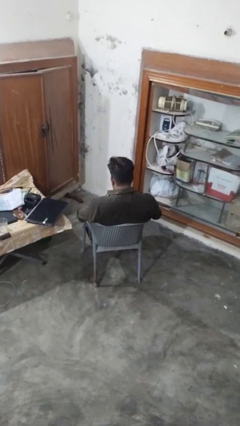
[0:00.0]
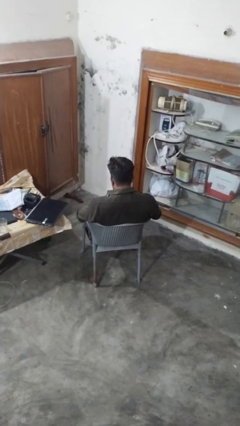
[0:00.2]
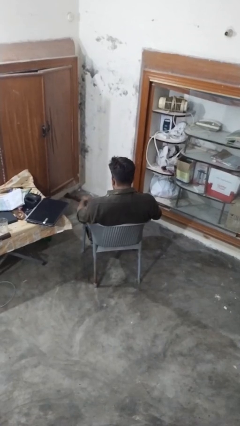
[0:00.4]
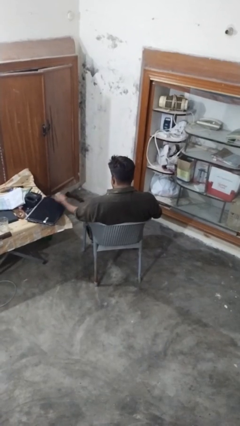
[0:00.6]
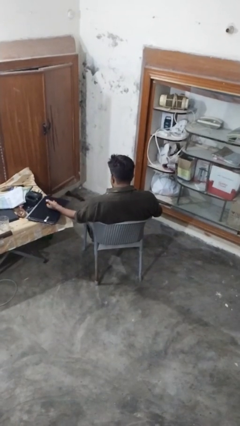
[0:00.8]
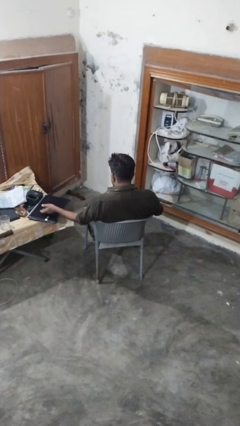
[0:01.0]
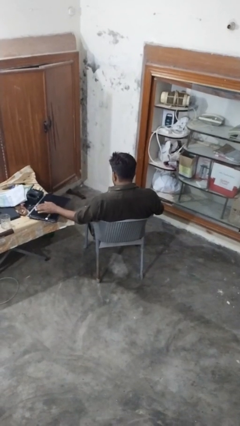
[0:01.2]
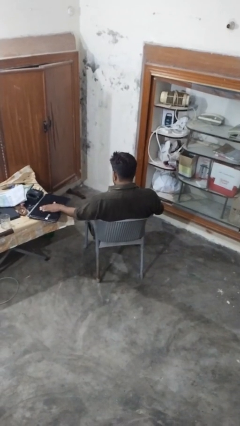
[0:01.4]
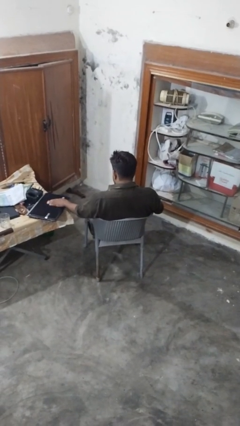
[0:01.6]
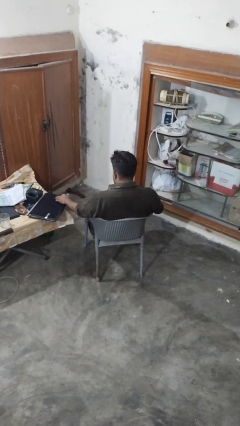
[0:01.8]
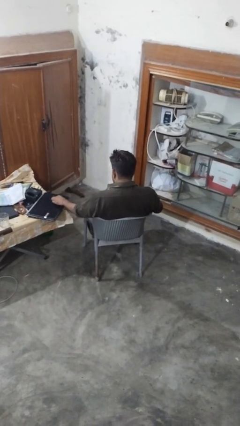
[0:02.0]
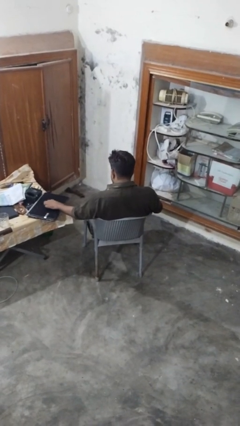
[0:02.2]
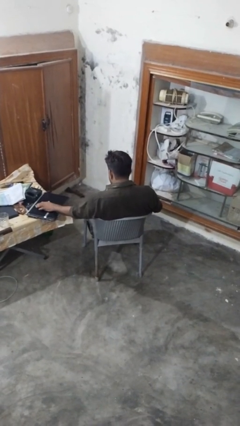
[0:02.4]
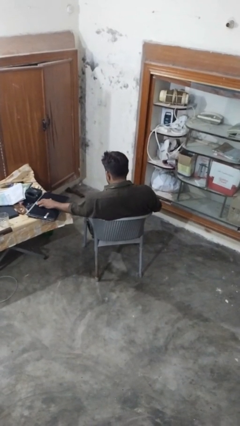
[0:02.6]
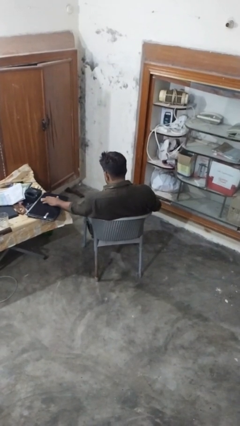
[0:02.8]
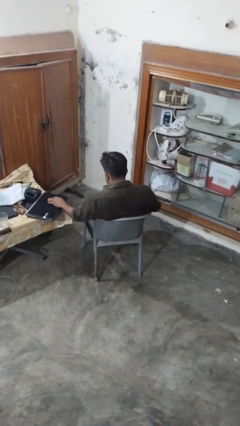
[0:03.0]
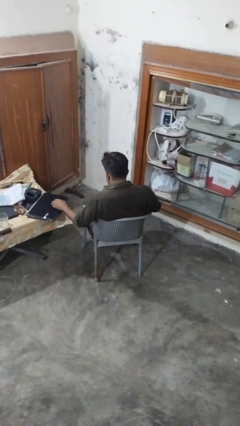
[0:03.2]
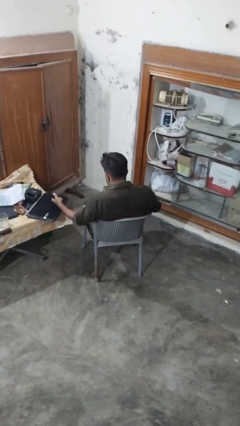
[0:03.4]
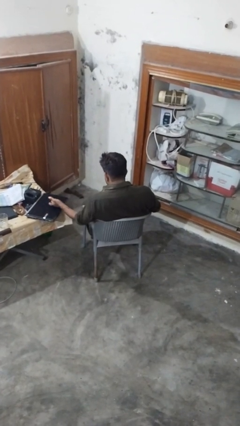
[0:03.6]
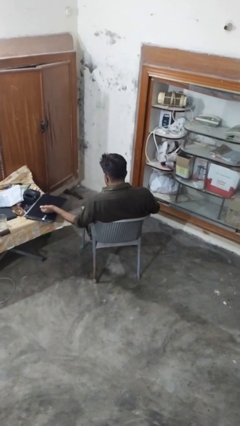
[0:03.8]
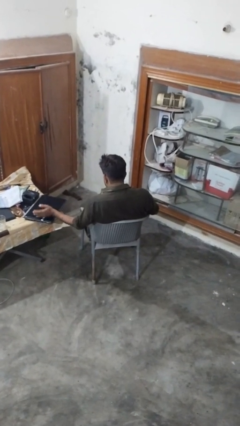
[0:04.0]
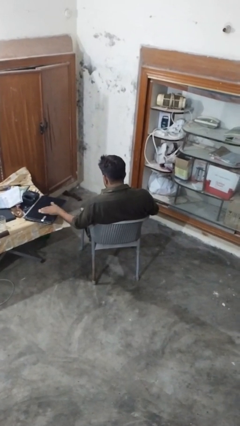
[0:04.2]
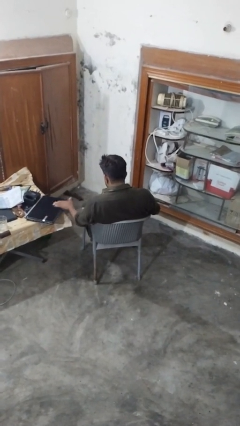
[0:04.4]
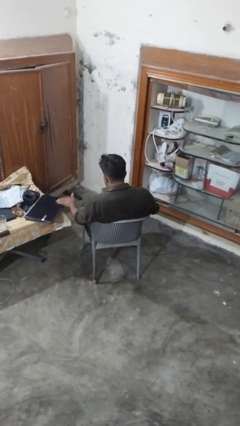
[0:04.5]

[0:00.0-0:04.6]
person waves hand over object

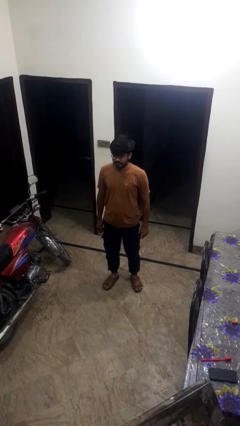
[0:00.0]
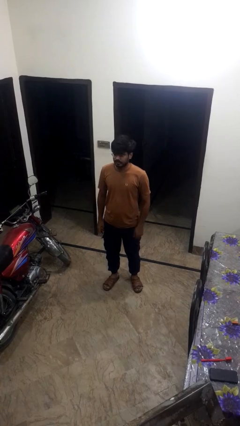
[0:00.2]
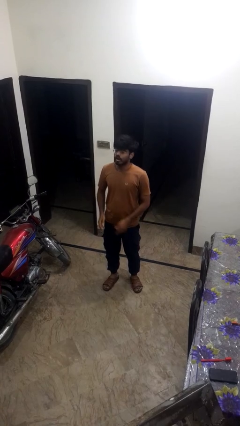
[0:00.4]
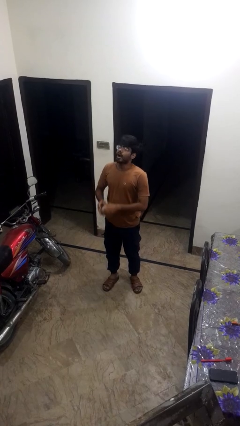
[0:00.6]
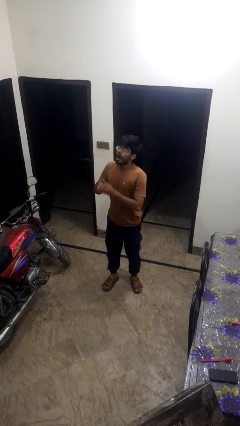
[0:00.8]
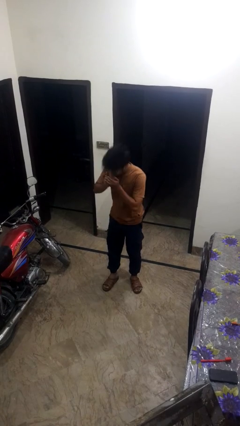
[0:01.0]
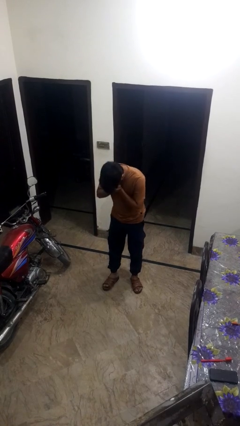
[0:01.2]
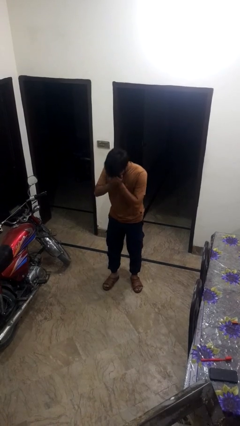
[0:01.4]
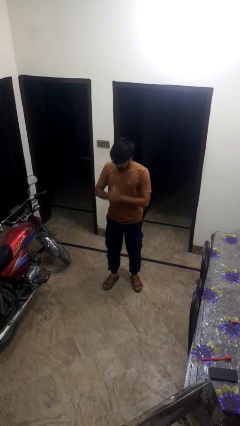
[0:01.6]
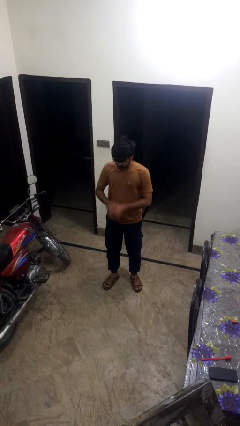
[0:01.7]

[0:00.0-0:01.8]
person sneezes into hand

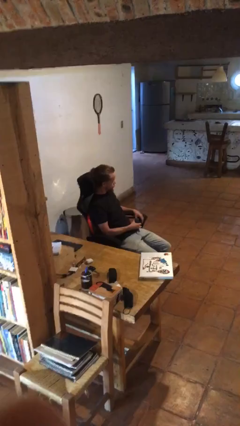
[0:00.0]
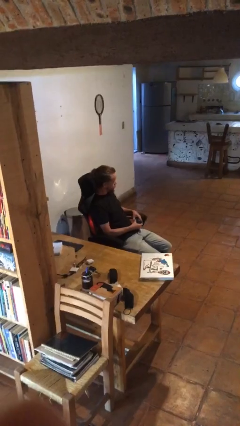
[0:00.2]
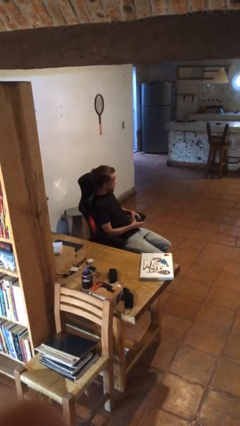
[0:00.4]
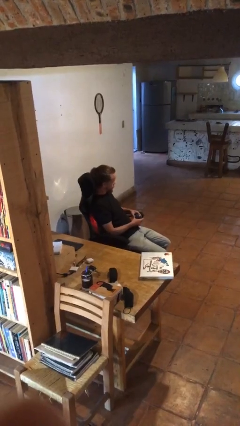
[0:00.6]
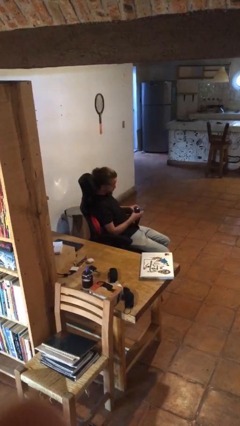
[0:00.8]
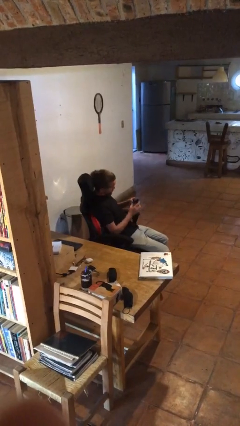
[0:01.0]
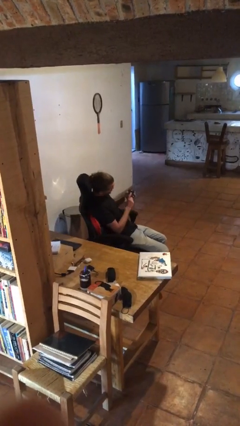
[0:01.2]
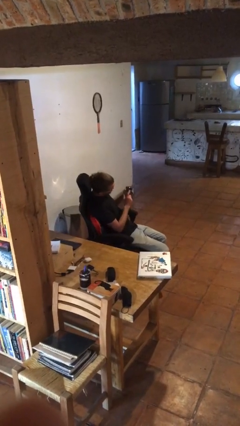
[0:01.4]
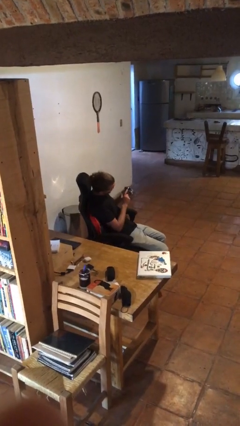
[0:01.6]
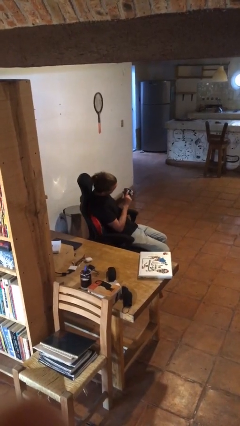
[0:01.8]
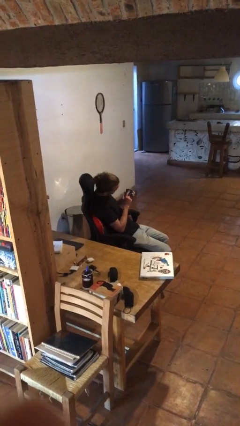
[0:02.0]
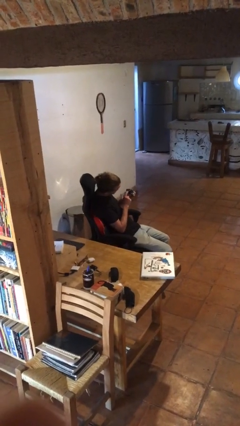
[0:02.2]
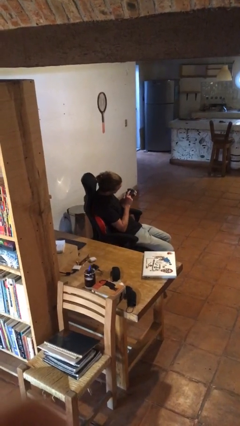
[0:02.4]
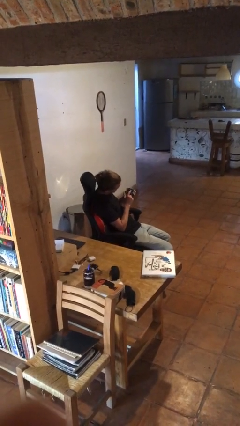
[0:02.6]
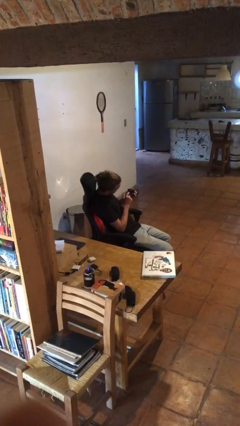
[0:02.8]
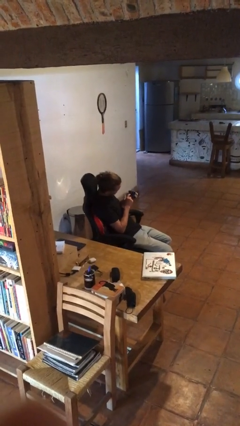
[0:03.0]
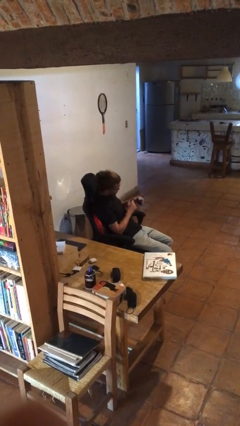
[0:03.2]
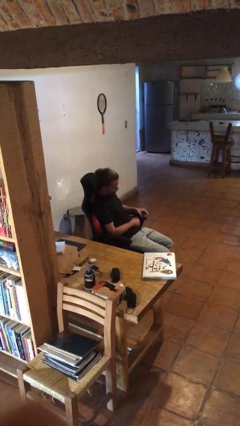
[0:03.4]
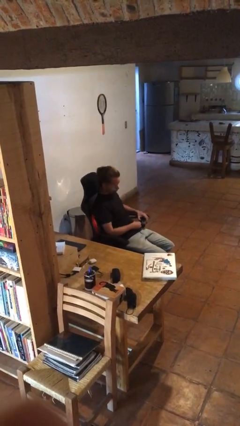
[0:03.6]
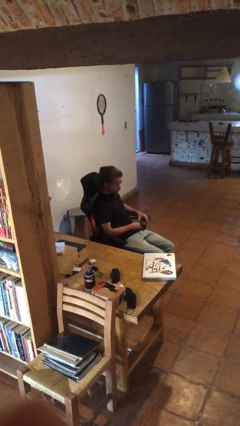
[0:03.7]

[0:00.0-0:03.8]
person taps object with finger

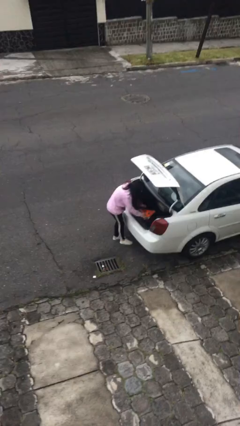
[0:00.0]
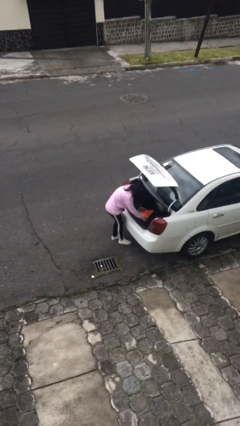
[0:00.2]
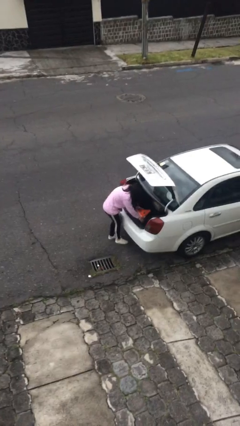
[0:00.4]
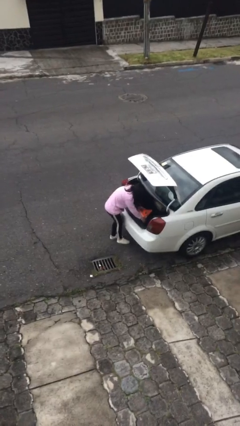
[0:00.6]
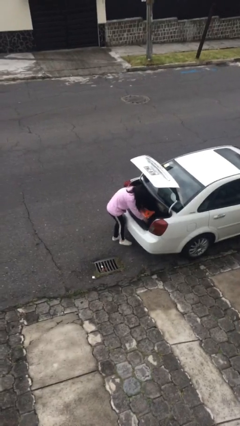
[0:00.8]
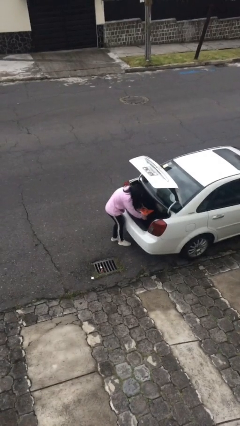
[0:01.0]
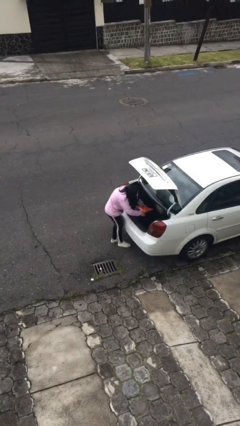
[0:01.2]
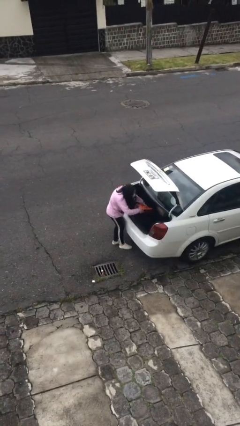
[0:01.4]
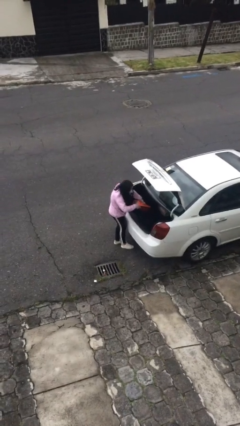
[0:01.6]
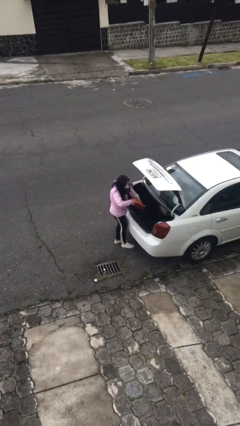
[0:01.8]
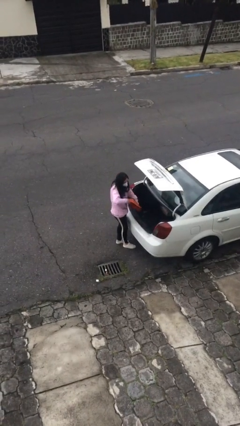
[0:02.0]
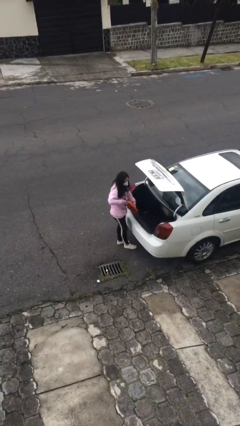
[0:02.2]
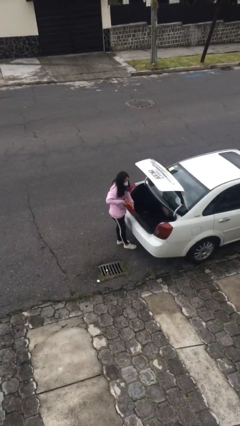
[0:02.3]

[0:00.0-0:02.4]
person unloads car

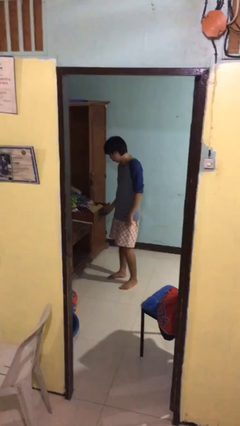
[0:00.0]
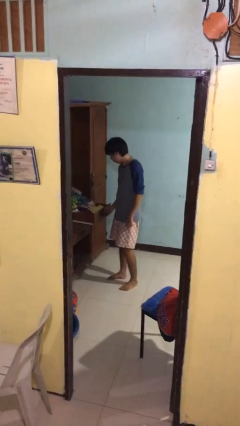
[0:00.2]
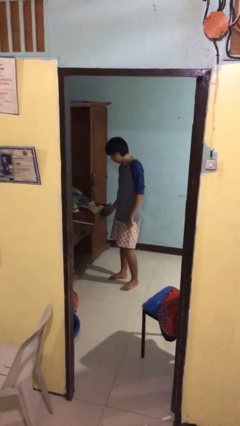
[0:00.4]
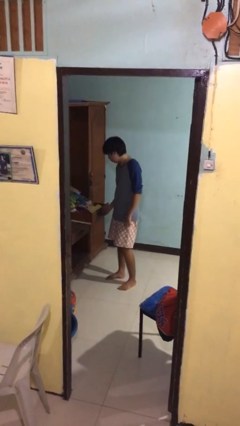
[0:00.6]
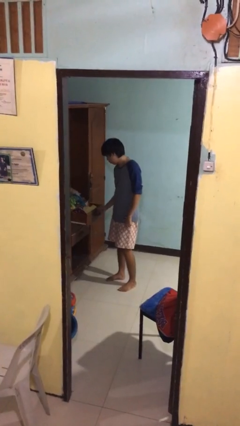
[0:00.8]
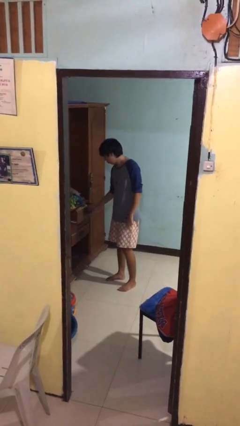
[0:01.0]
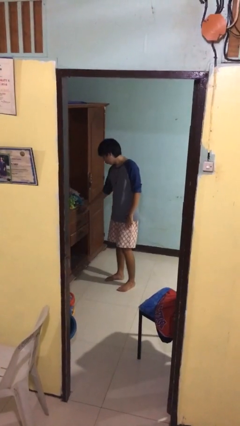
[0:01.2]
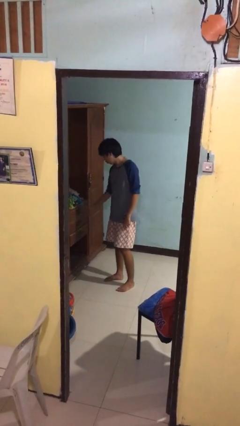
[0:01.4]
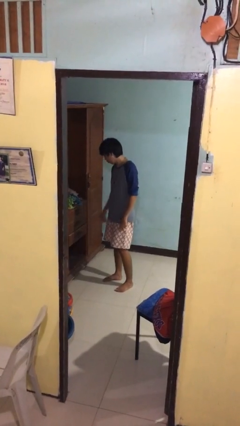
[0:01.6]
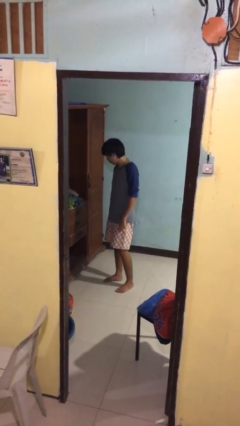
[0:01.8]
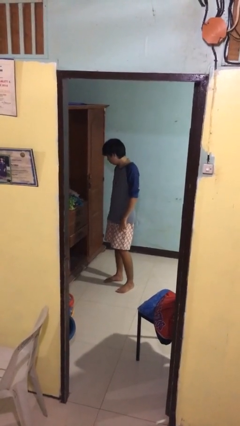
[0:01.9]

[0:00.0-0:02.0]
person closes dresser drawer

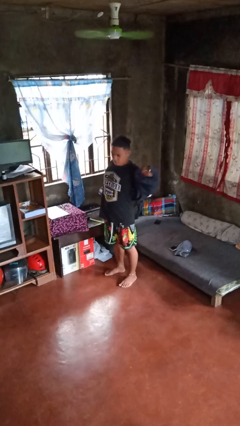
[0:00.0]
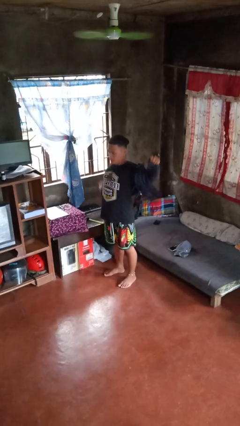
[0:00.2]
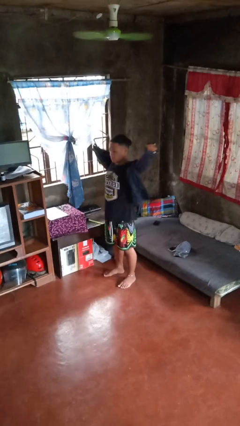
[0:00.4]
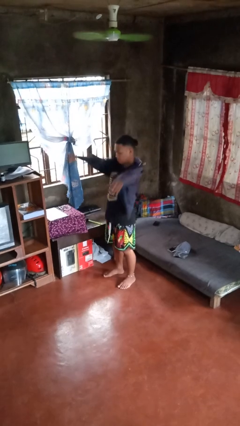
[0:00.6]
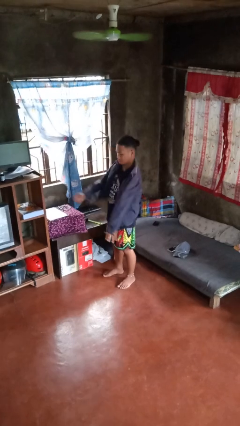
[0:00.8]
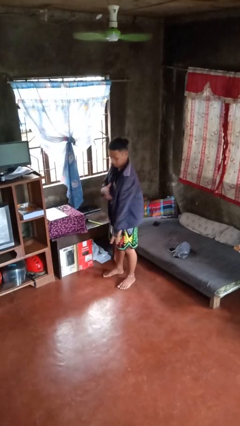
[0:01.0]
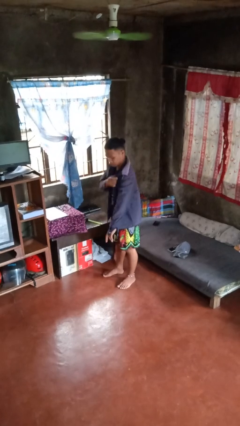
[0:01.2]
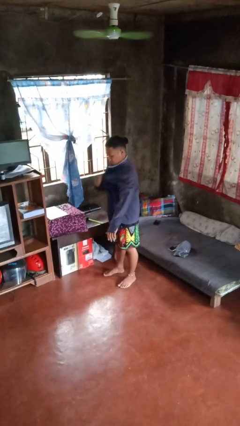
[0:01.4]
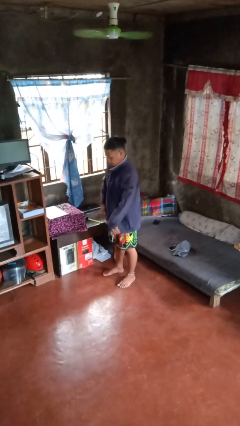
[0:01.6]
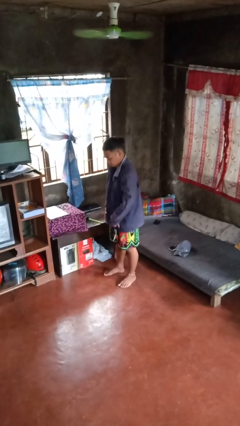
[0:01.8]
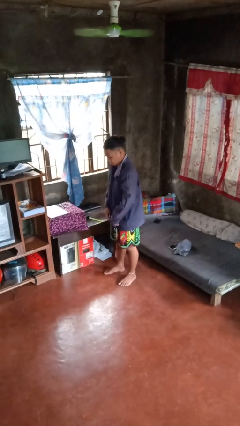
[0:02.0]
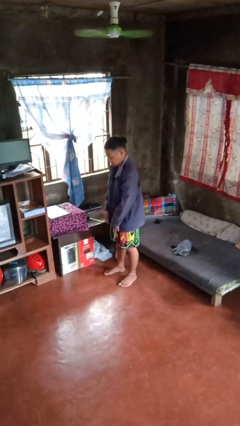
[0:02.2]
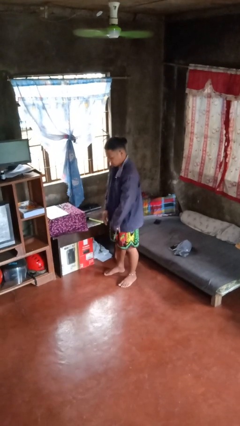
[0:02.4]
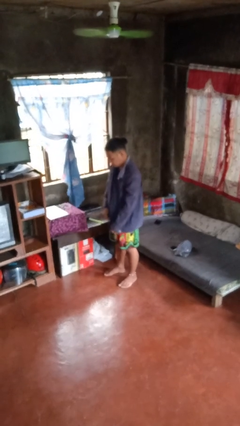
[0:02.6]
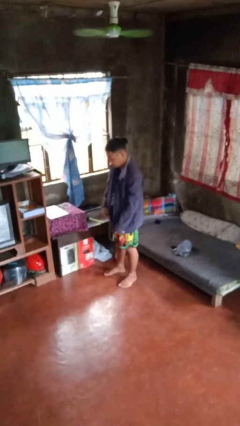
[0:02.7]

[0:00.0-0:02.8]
person puts on jacket

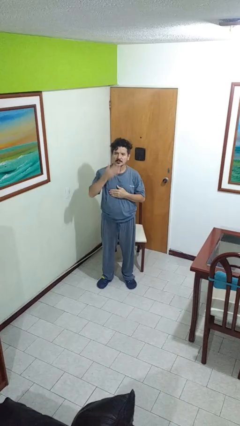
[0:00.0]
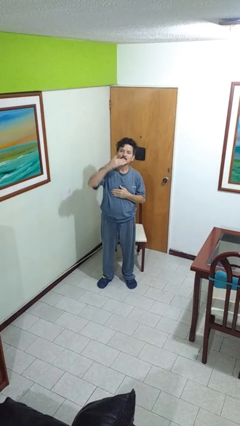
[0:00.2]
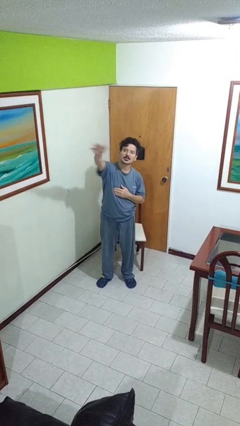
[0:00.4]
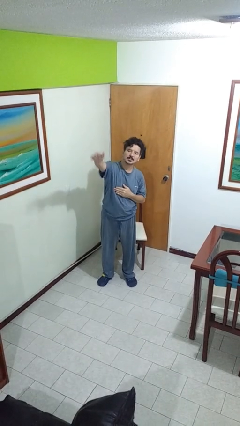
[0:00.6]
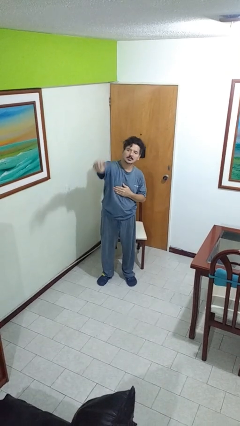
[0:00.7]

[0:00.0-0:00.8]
person gestures blow kiss
